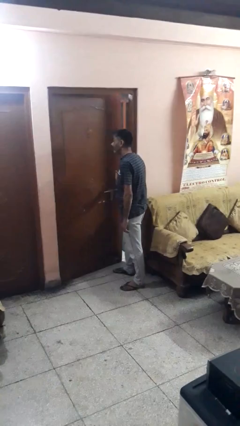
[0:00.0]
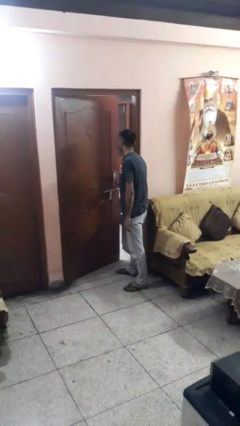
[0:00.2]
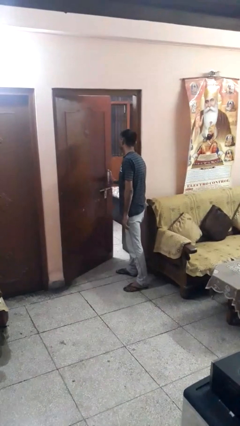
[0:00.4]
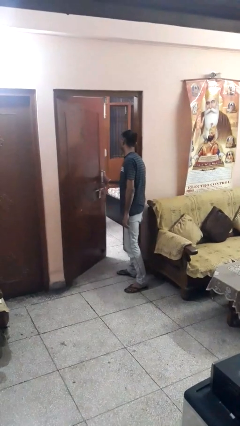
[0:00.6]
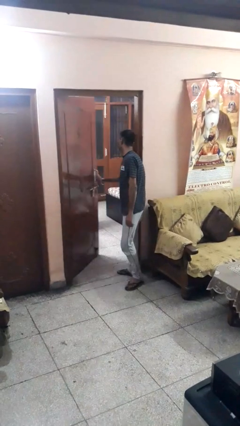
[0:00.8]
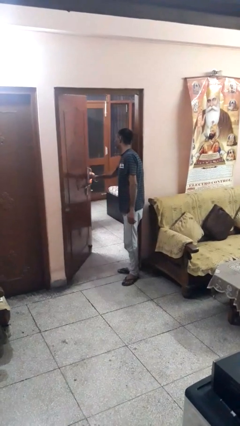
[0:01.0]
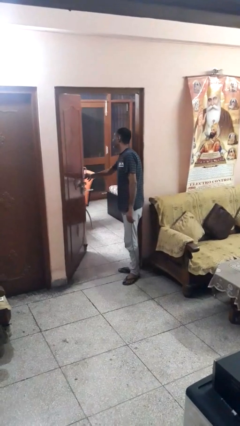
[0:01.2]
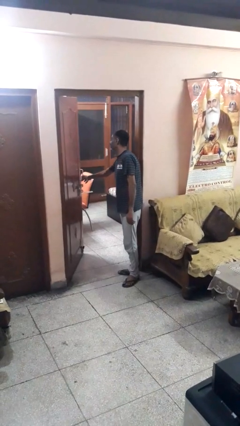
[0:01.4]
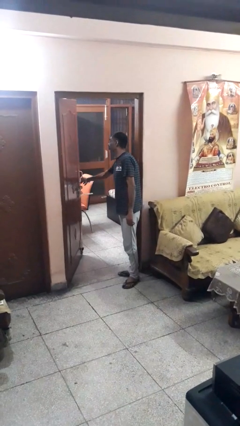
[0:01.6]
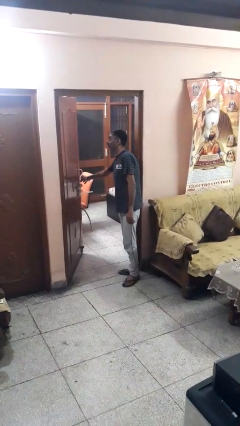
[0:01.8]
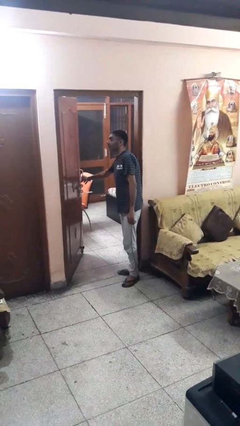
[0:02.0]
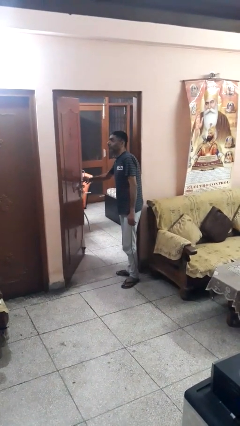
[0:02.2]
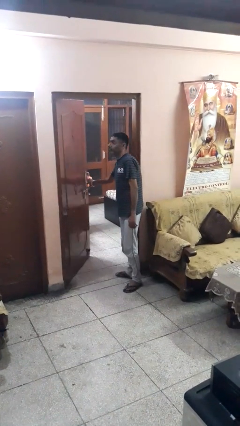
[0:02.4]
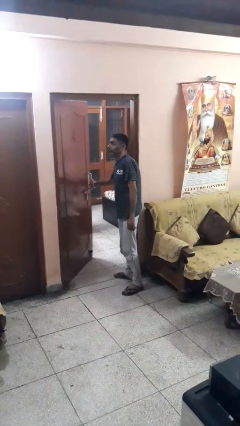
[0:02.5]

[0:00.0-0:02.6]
person opens facility door

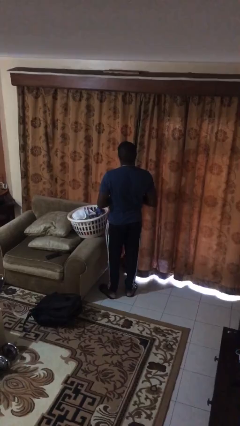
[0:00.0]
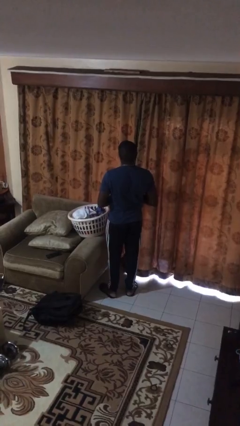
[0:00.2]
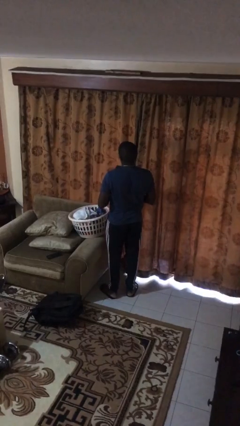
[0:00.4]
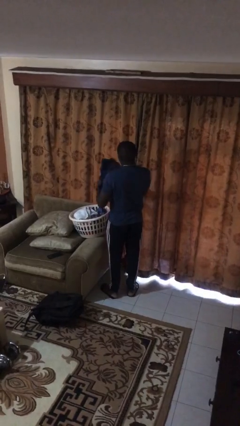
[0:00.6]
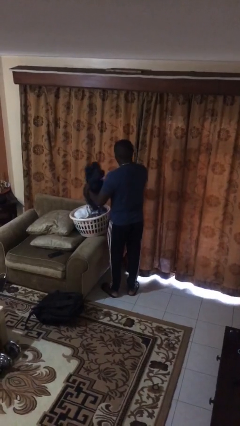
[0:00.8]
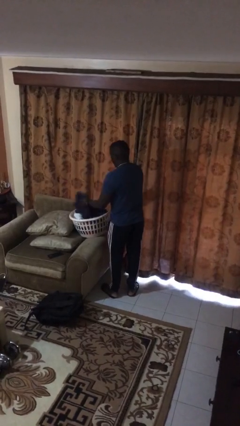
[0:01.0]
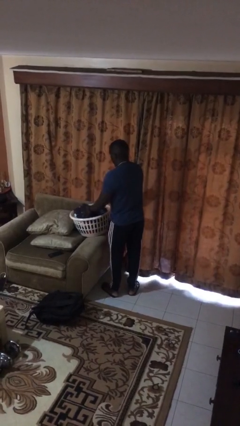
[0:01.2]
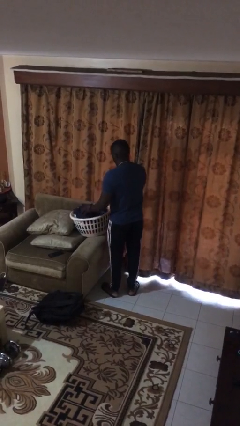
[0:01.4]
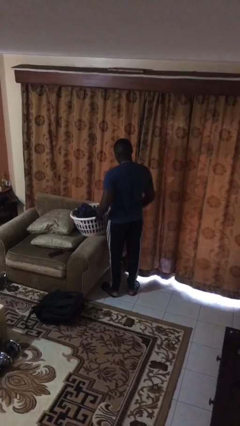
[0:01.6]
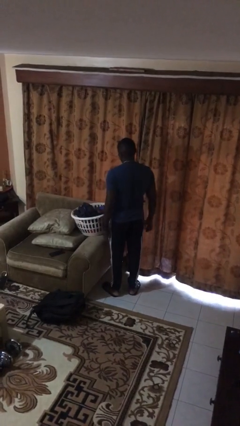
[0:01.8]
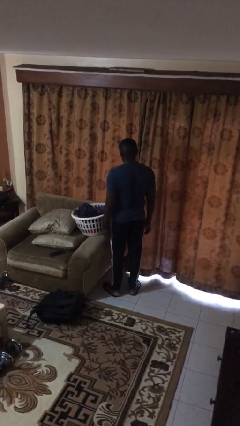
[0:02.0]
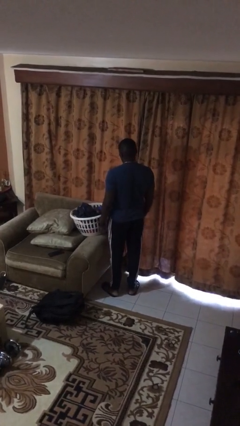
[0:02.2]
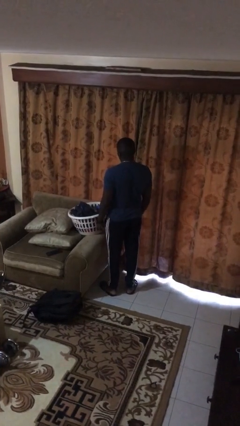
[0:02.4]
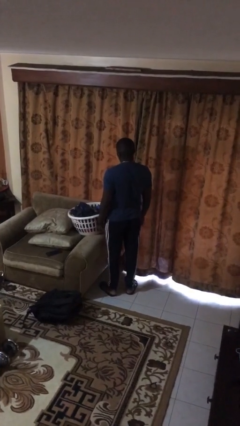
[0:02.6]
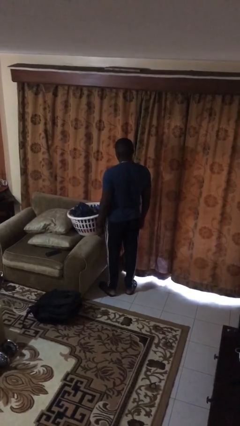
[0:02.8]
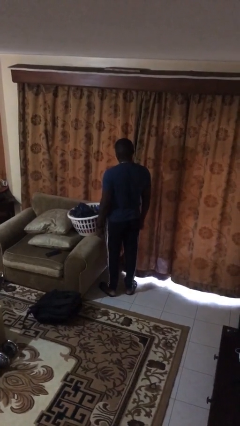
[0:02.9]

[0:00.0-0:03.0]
person puts object into basket

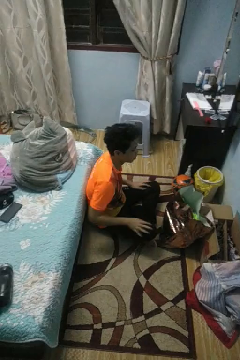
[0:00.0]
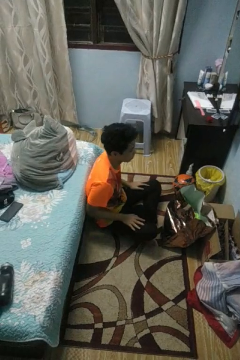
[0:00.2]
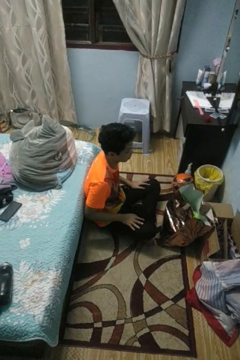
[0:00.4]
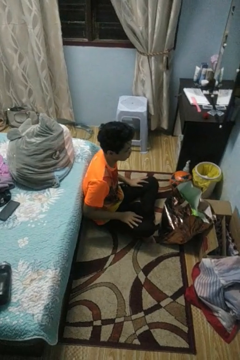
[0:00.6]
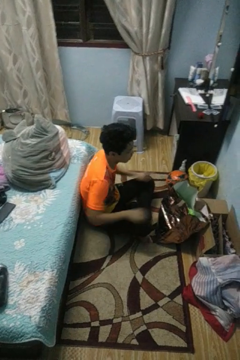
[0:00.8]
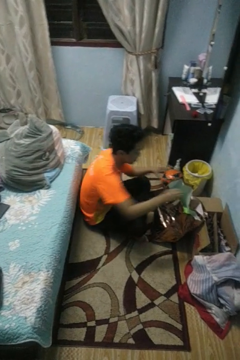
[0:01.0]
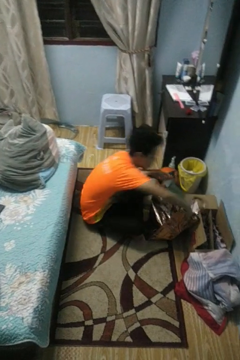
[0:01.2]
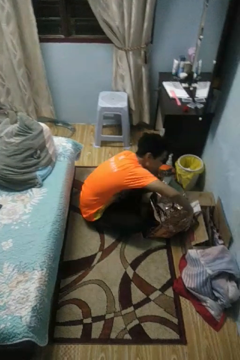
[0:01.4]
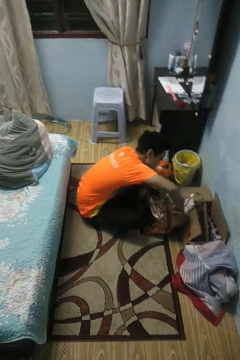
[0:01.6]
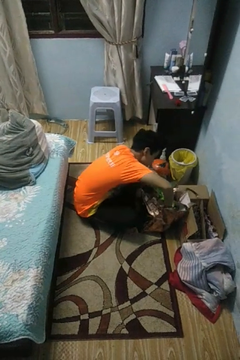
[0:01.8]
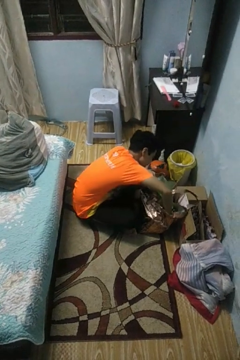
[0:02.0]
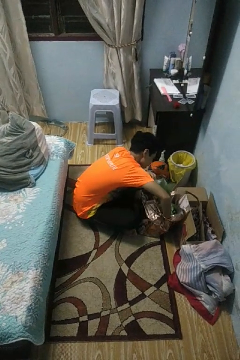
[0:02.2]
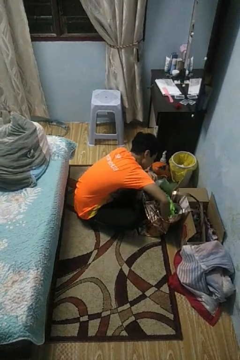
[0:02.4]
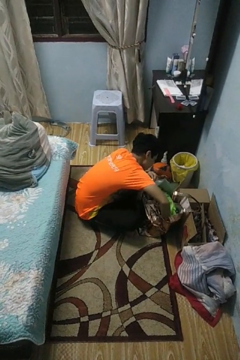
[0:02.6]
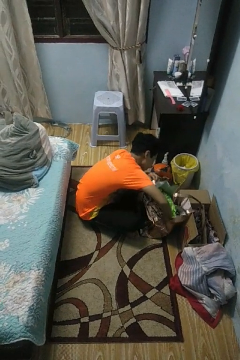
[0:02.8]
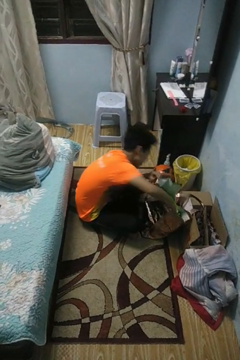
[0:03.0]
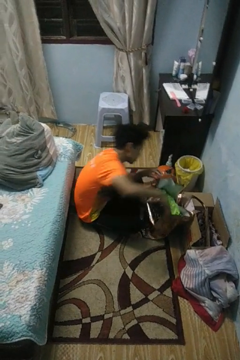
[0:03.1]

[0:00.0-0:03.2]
person searches in bag

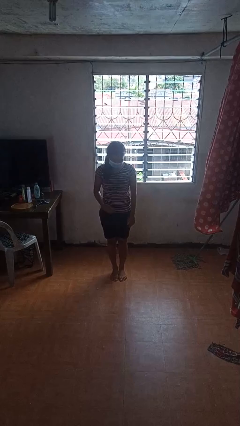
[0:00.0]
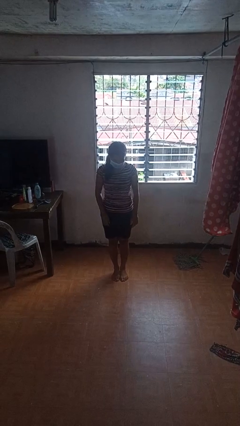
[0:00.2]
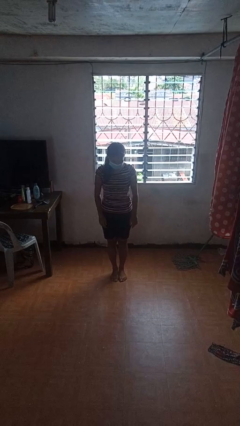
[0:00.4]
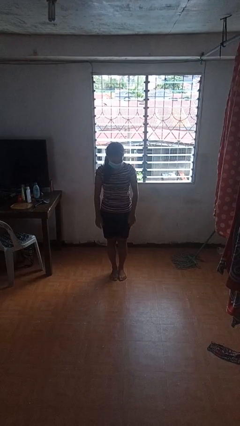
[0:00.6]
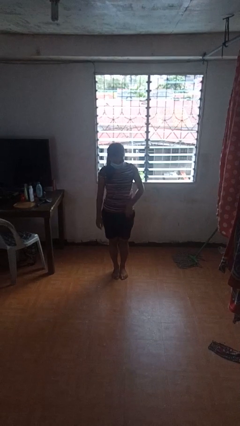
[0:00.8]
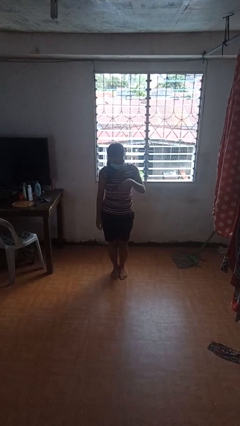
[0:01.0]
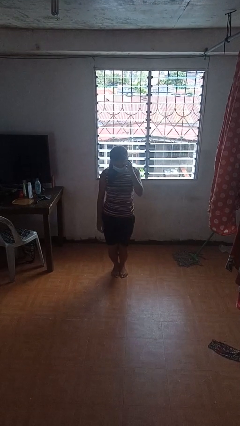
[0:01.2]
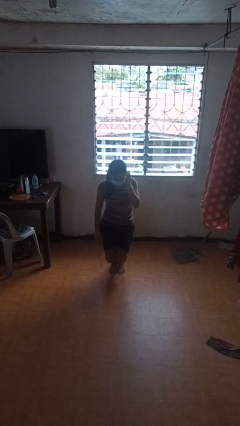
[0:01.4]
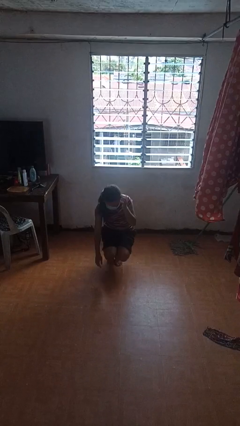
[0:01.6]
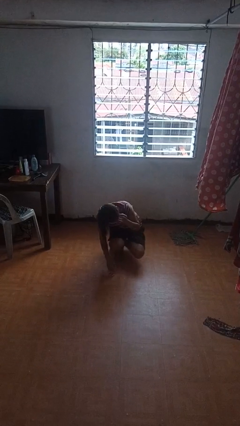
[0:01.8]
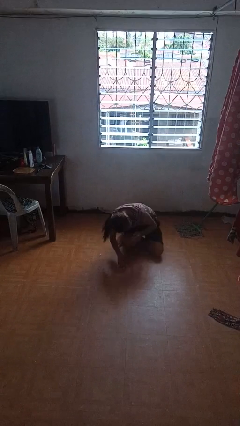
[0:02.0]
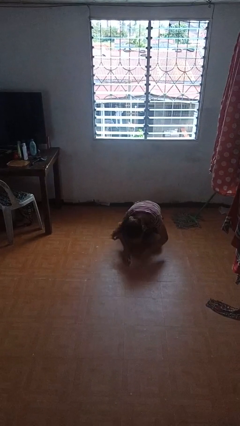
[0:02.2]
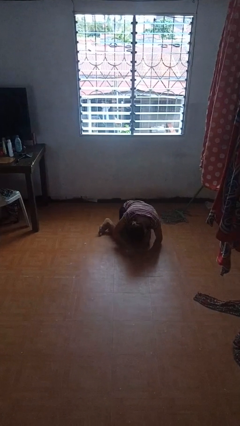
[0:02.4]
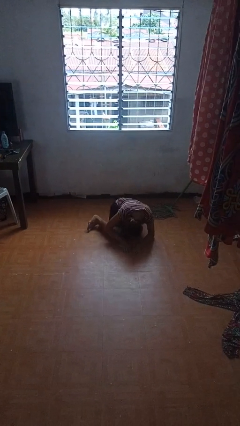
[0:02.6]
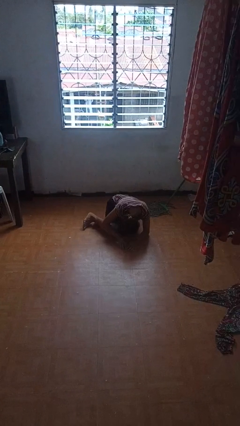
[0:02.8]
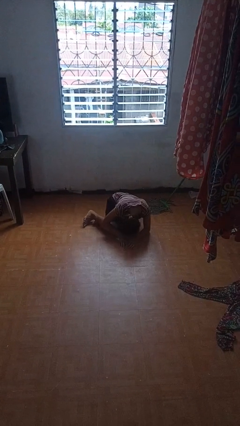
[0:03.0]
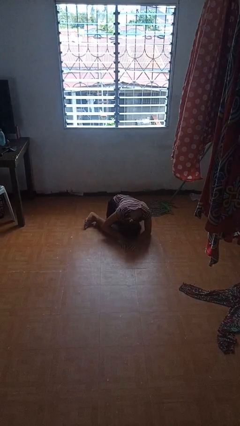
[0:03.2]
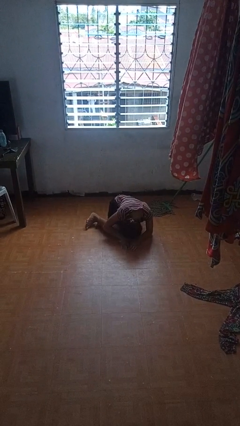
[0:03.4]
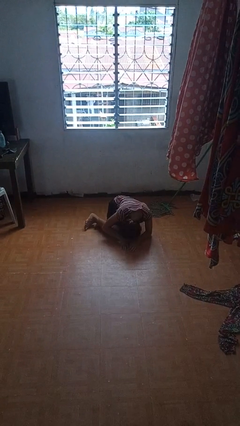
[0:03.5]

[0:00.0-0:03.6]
person falls while standing

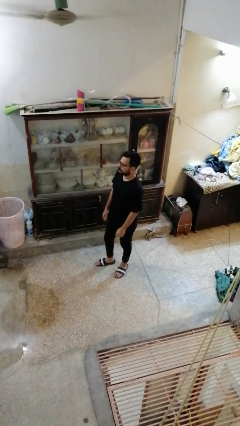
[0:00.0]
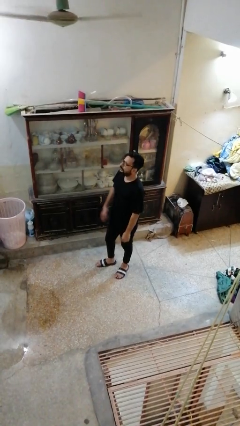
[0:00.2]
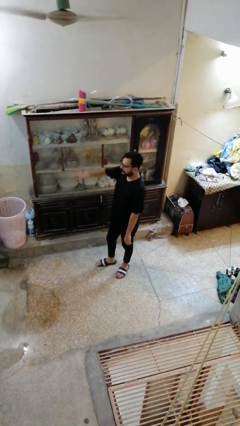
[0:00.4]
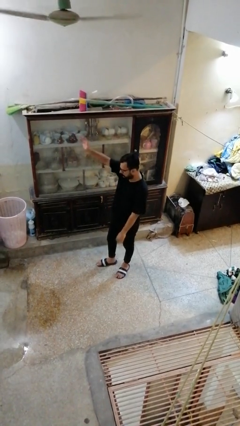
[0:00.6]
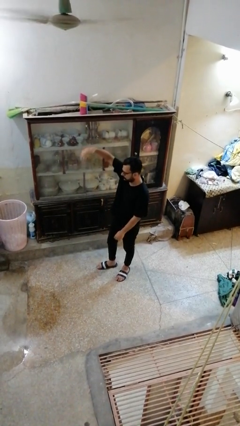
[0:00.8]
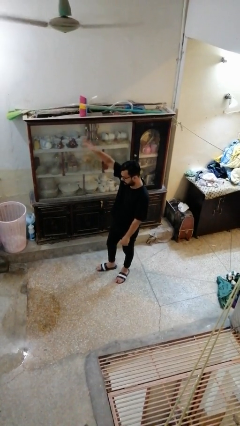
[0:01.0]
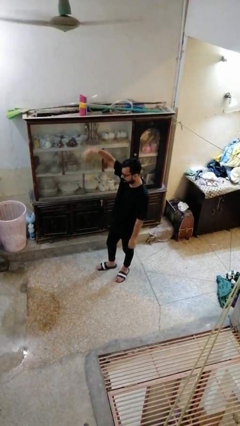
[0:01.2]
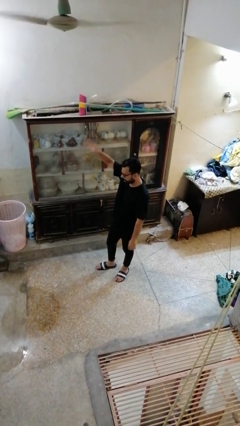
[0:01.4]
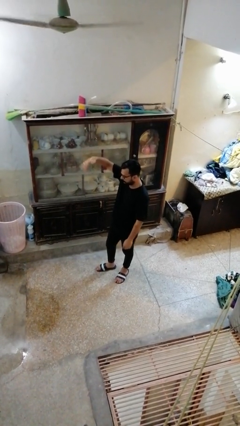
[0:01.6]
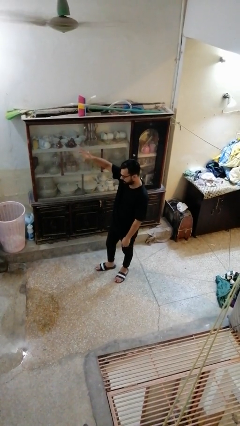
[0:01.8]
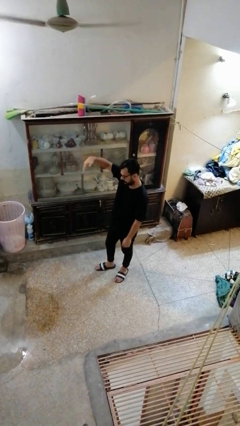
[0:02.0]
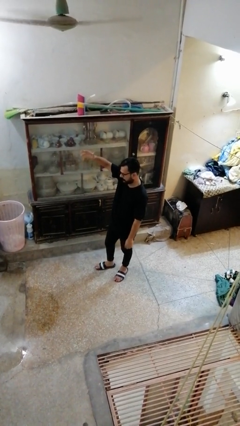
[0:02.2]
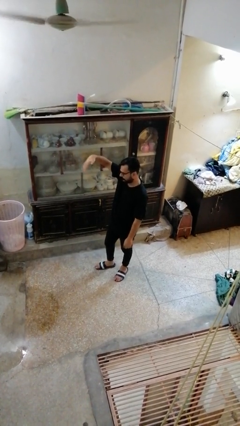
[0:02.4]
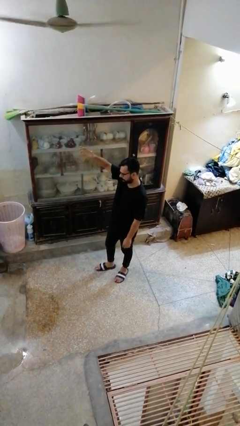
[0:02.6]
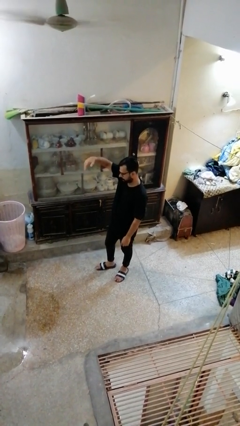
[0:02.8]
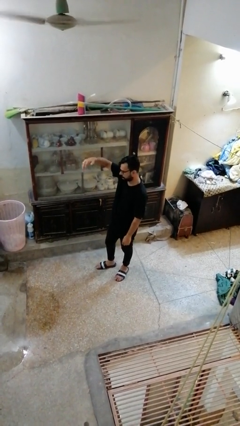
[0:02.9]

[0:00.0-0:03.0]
person gestures come here

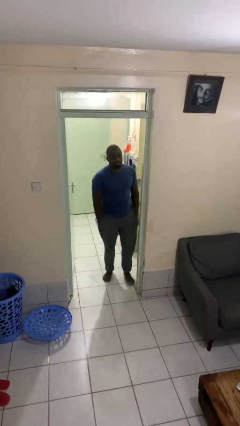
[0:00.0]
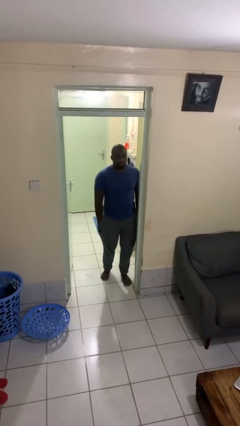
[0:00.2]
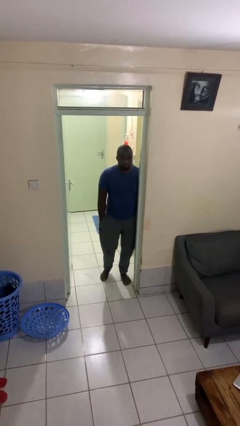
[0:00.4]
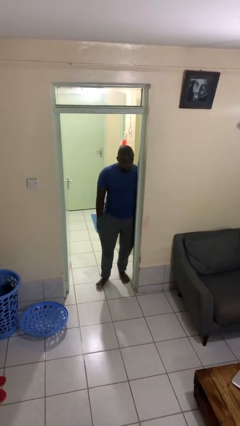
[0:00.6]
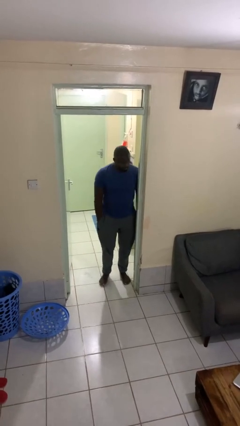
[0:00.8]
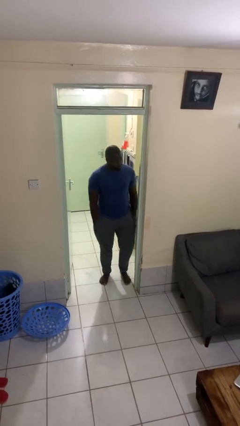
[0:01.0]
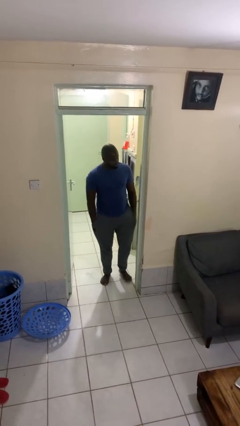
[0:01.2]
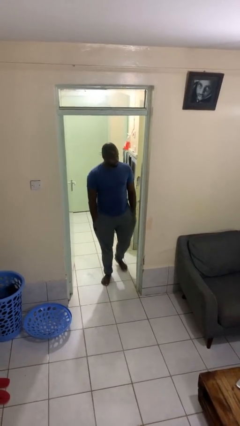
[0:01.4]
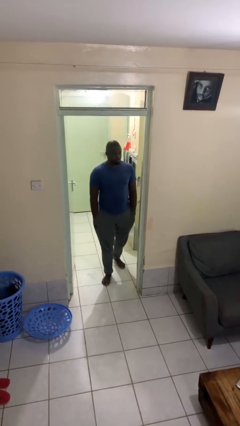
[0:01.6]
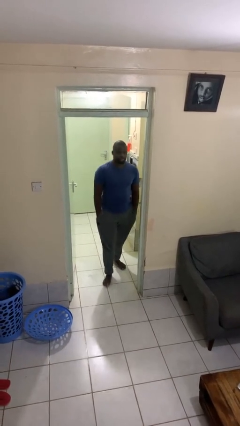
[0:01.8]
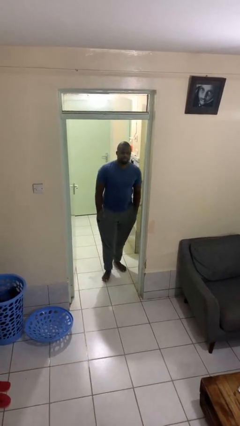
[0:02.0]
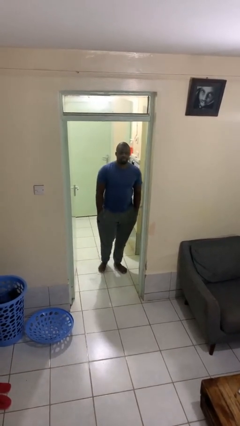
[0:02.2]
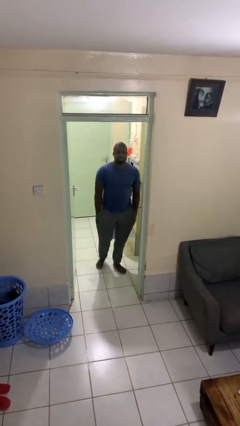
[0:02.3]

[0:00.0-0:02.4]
person bumps into wall
